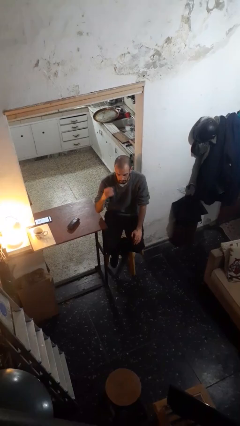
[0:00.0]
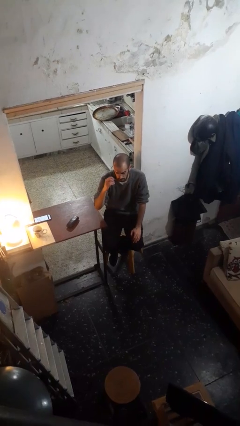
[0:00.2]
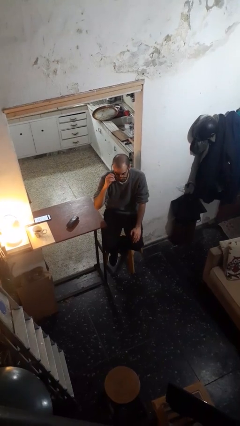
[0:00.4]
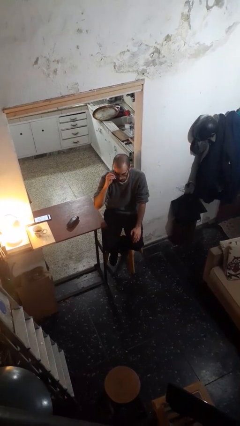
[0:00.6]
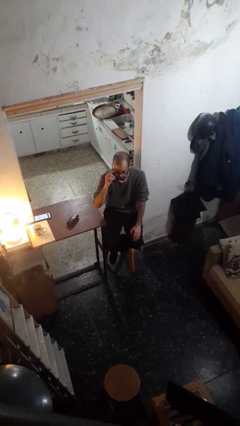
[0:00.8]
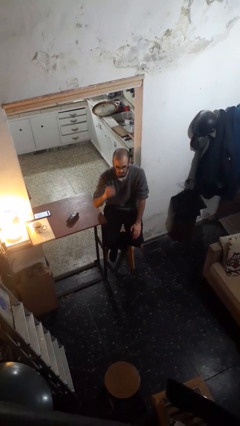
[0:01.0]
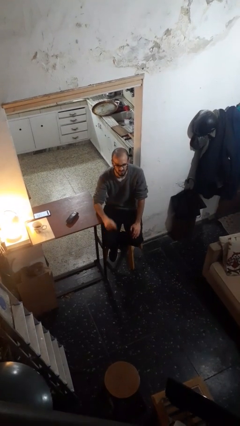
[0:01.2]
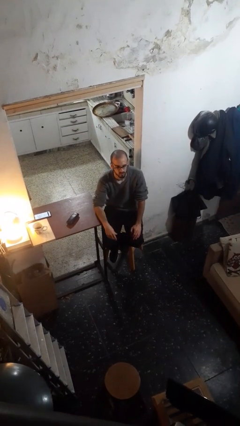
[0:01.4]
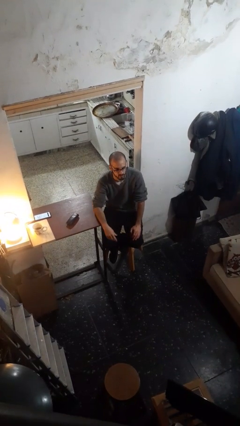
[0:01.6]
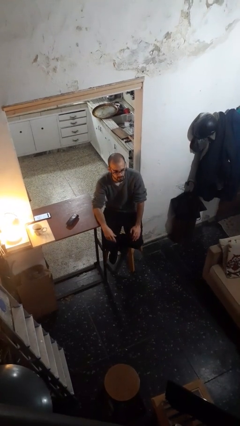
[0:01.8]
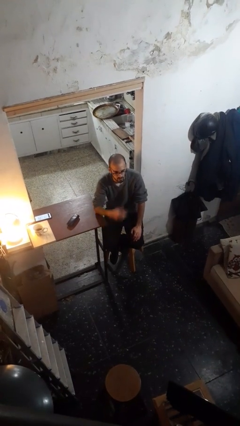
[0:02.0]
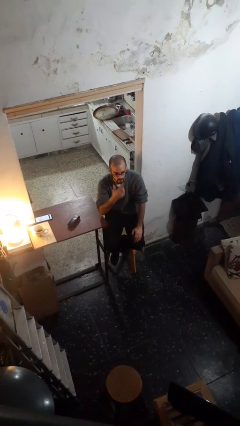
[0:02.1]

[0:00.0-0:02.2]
person puts on glasses

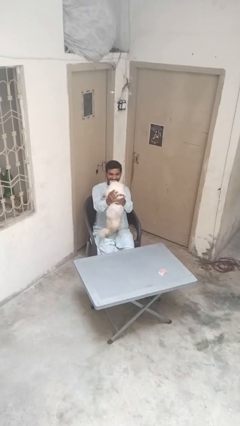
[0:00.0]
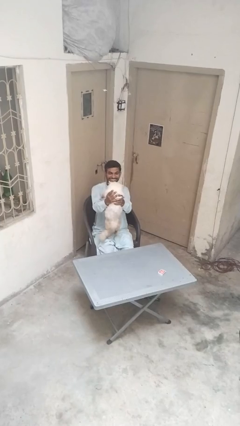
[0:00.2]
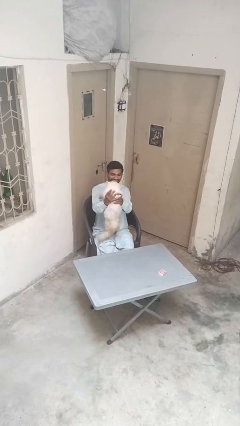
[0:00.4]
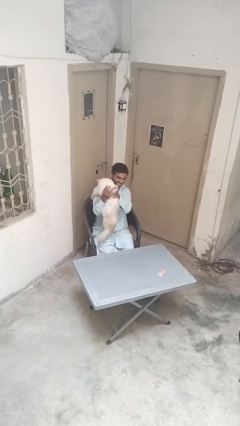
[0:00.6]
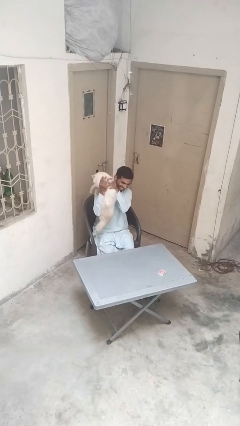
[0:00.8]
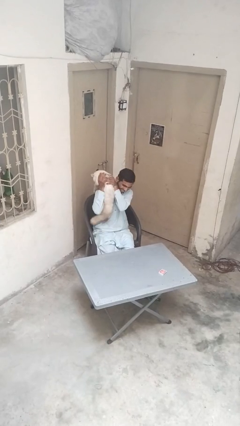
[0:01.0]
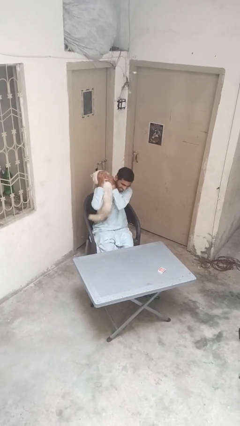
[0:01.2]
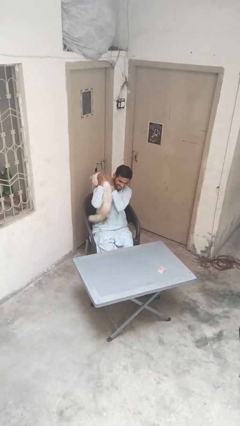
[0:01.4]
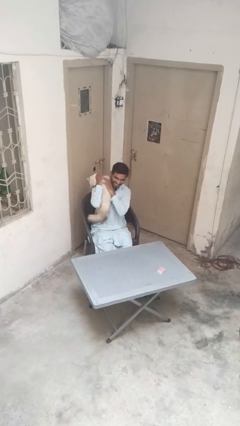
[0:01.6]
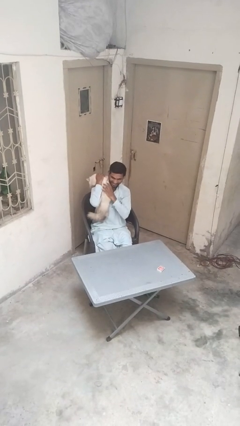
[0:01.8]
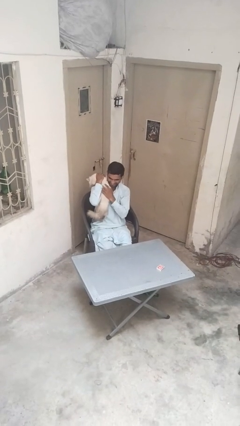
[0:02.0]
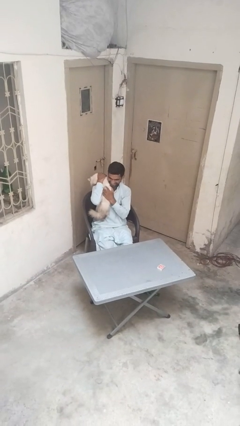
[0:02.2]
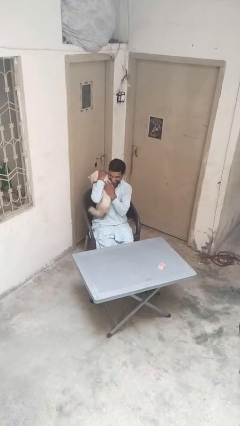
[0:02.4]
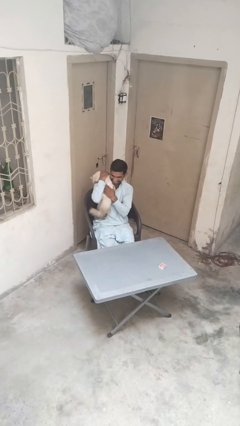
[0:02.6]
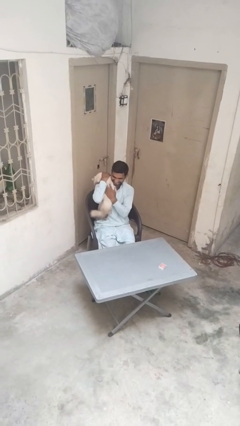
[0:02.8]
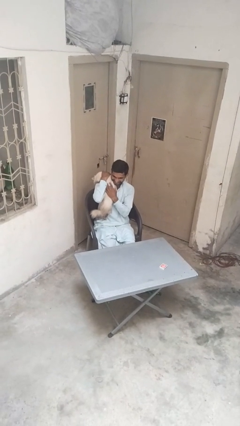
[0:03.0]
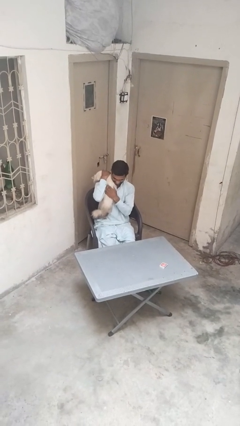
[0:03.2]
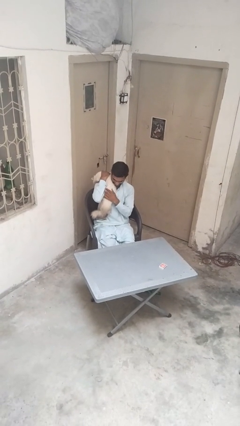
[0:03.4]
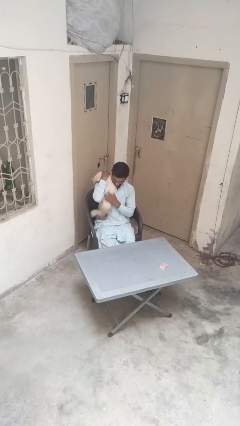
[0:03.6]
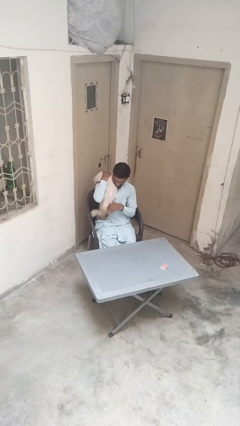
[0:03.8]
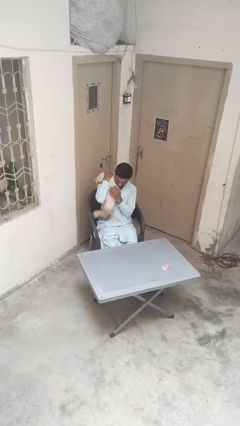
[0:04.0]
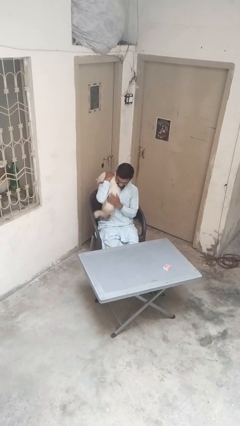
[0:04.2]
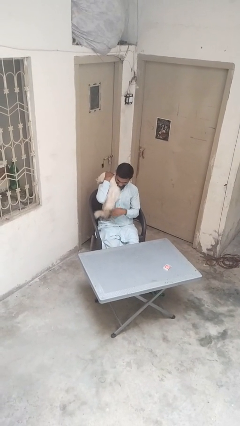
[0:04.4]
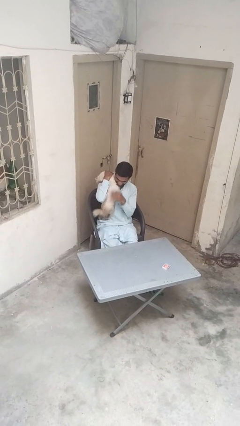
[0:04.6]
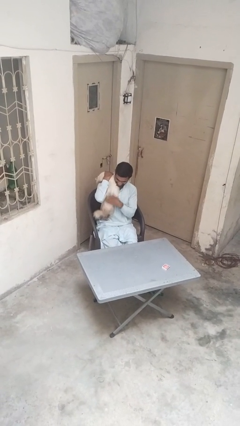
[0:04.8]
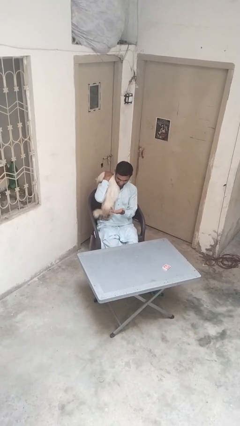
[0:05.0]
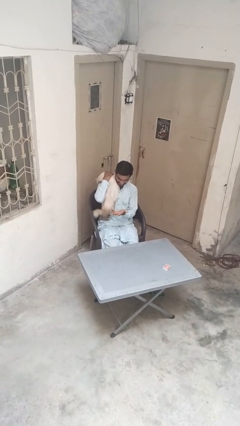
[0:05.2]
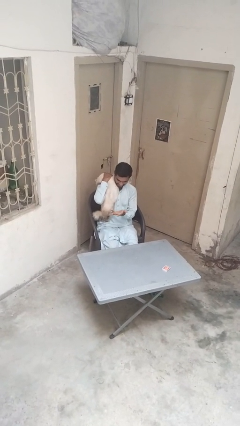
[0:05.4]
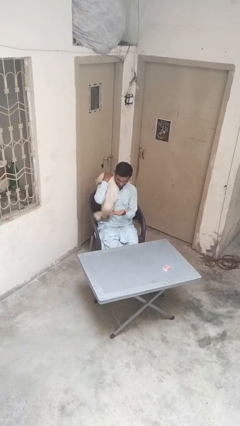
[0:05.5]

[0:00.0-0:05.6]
person hugs cat

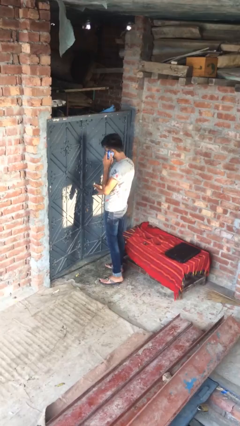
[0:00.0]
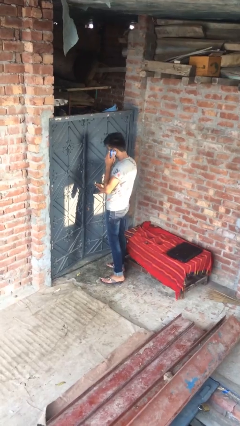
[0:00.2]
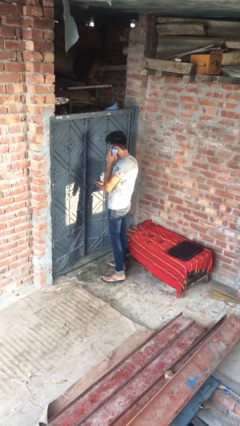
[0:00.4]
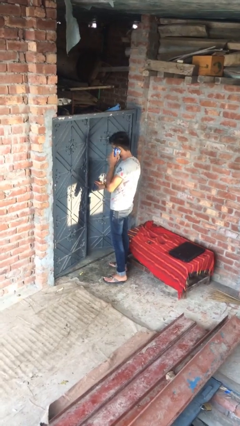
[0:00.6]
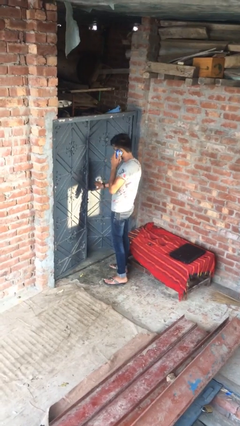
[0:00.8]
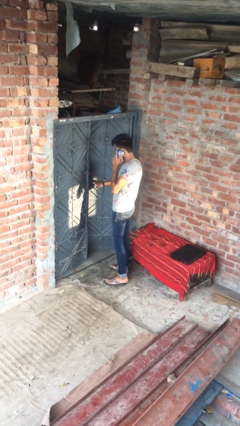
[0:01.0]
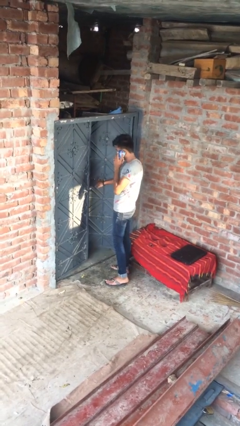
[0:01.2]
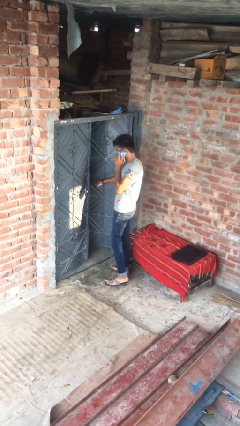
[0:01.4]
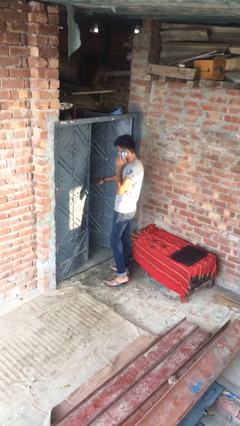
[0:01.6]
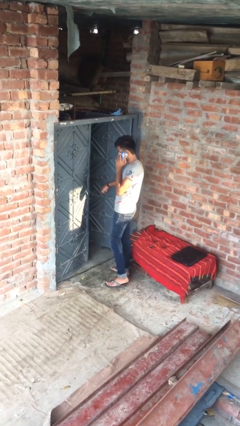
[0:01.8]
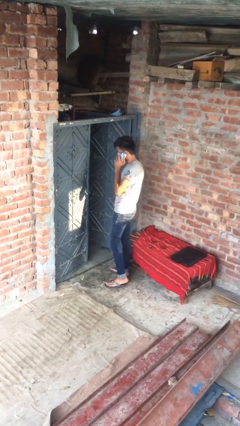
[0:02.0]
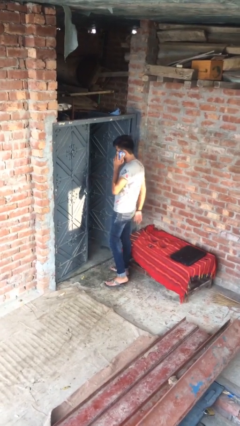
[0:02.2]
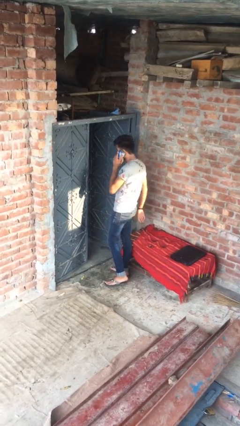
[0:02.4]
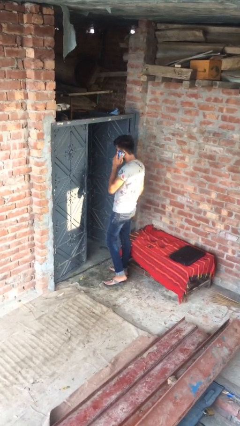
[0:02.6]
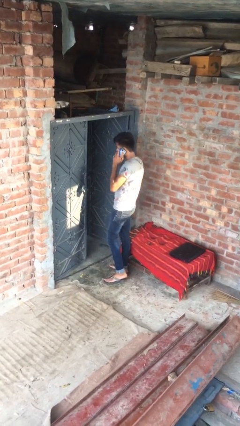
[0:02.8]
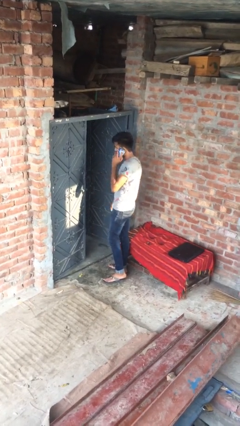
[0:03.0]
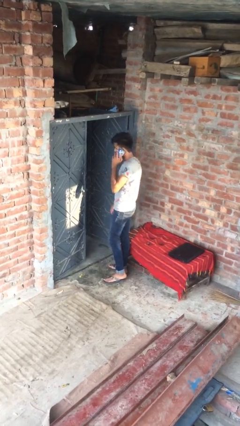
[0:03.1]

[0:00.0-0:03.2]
person opens facility door

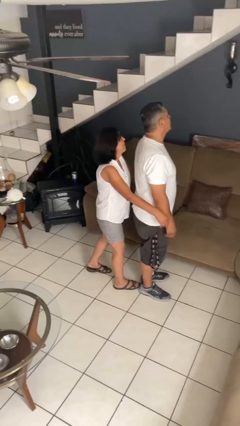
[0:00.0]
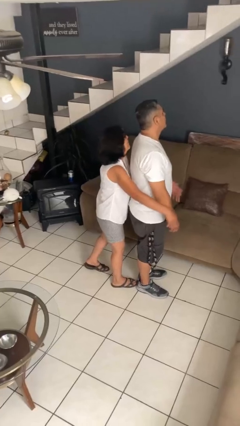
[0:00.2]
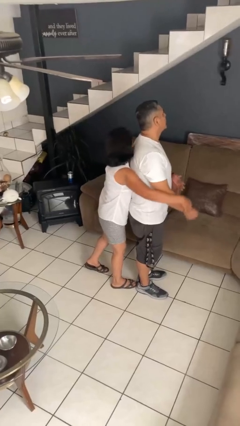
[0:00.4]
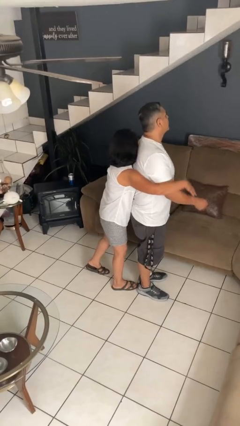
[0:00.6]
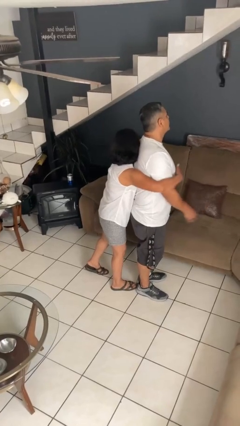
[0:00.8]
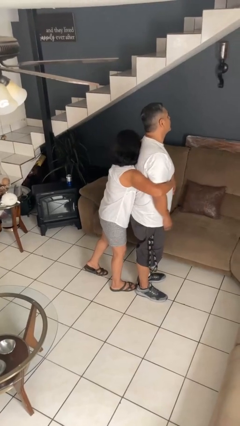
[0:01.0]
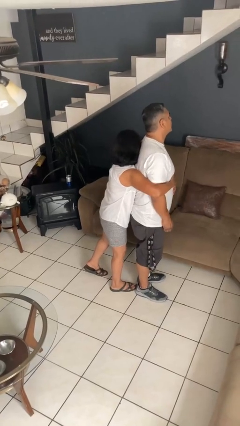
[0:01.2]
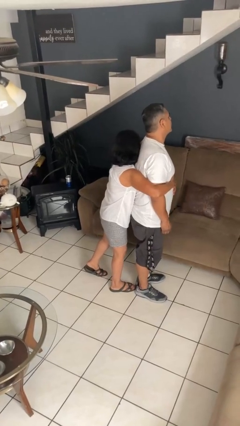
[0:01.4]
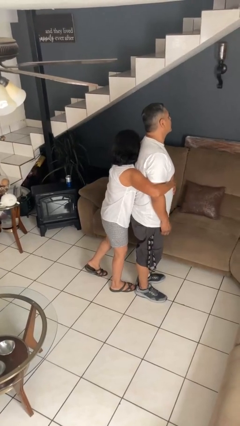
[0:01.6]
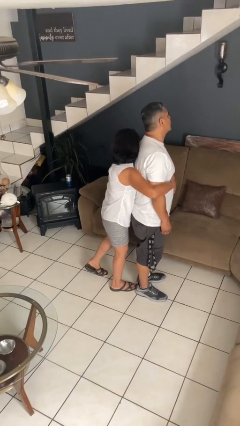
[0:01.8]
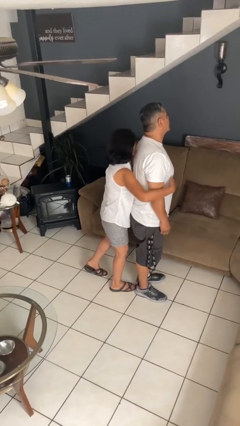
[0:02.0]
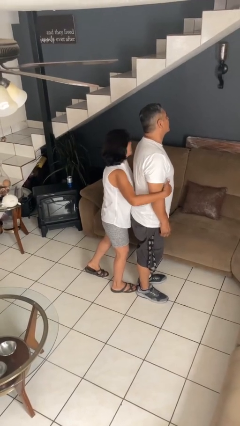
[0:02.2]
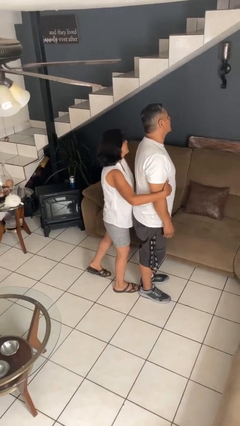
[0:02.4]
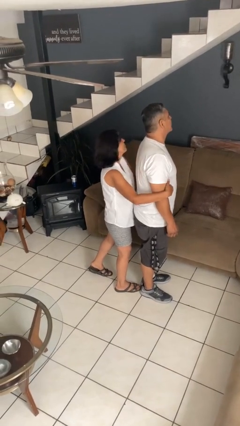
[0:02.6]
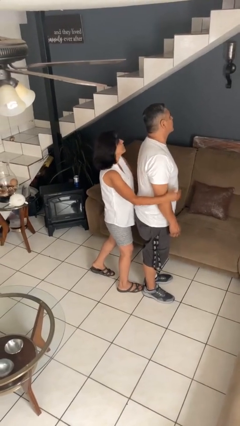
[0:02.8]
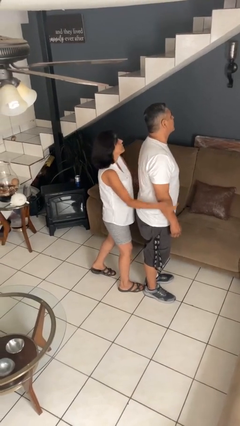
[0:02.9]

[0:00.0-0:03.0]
person hugs person from behind

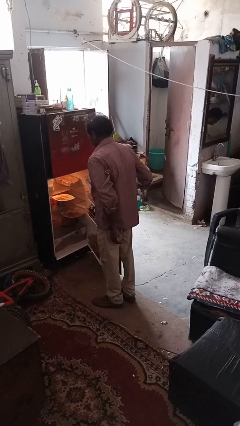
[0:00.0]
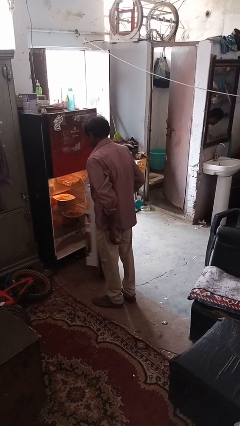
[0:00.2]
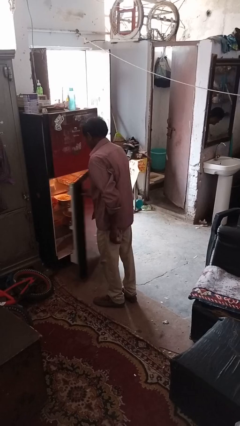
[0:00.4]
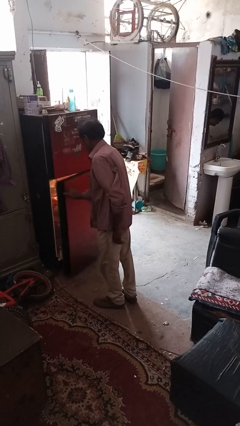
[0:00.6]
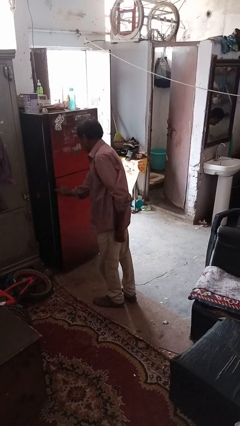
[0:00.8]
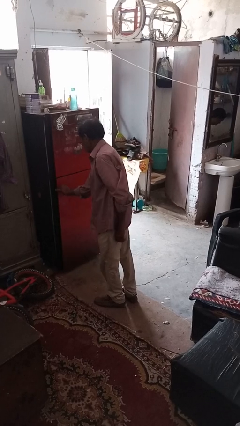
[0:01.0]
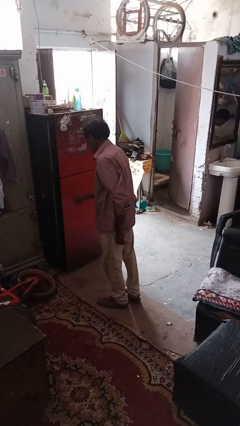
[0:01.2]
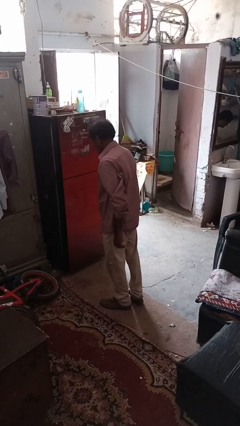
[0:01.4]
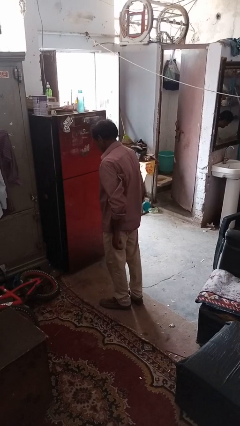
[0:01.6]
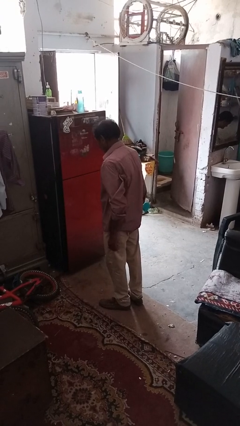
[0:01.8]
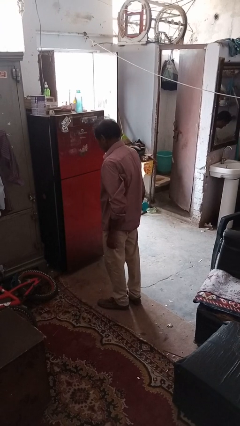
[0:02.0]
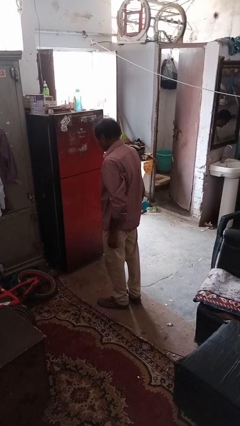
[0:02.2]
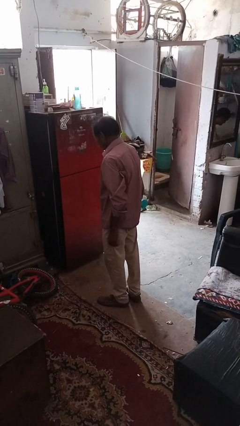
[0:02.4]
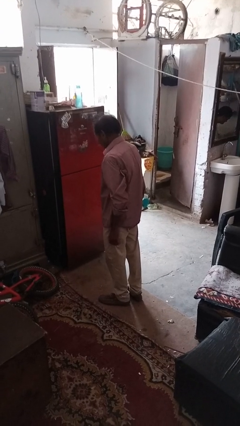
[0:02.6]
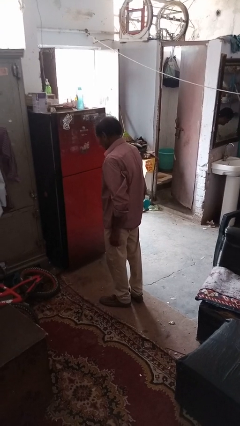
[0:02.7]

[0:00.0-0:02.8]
person closes refrigerator

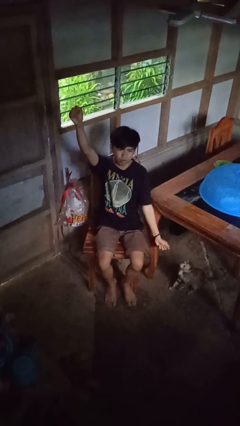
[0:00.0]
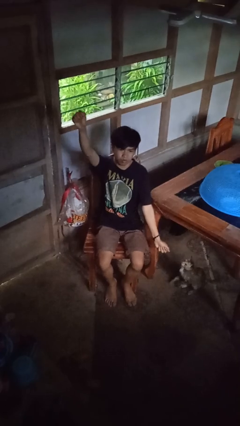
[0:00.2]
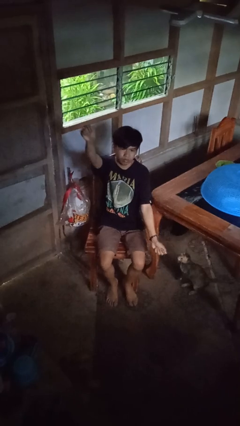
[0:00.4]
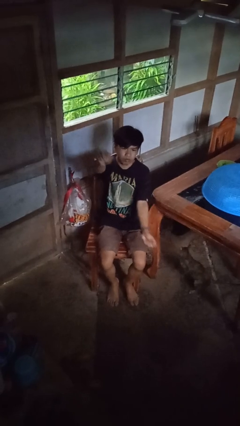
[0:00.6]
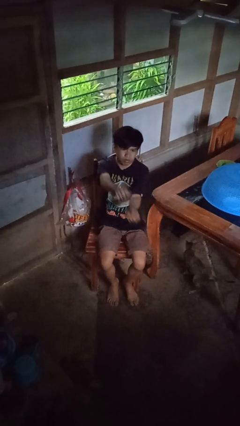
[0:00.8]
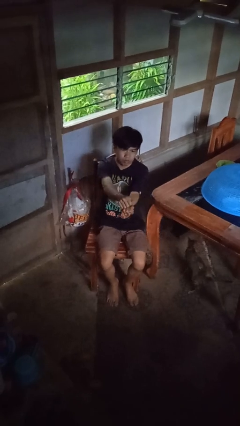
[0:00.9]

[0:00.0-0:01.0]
person gestures zoom in
